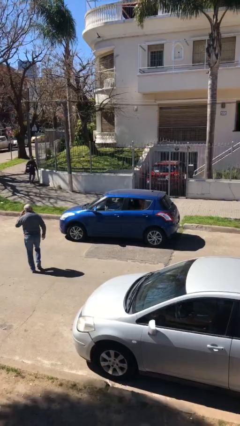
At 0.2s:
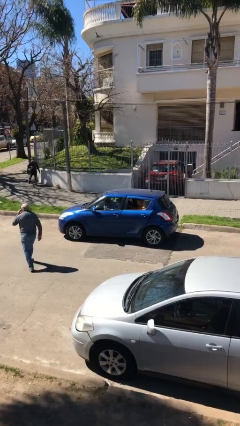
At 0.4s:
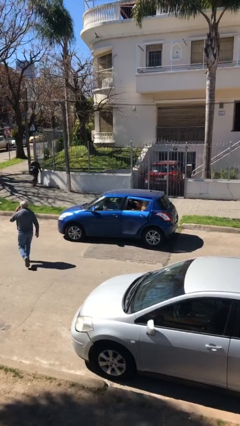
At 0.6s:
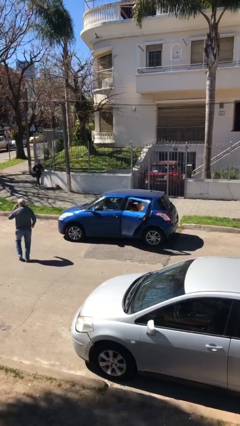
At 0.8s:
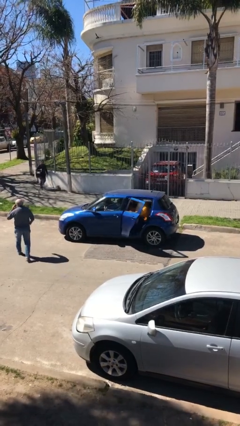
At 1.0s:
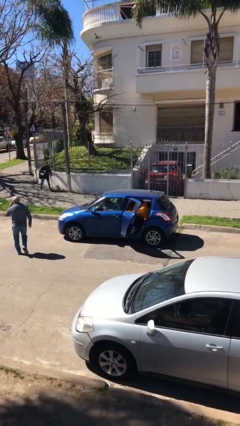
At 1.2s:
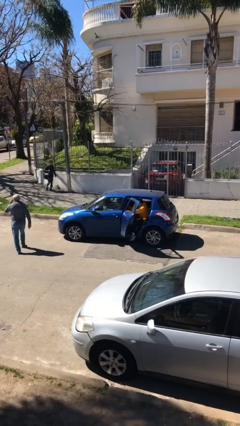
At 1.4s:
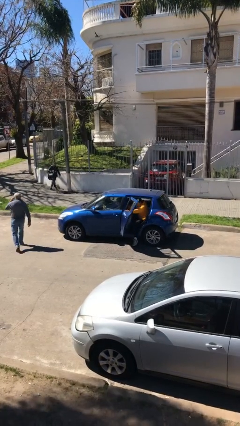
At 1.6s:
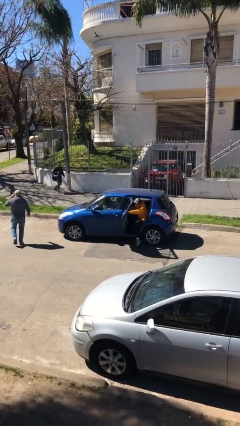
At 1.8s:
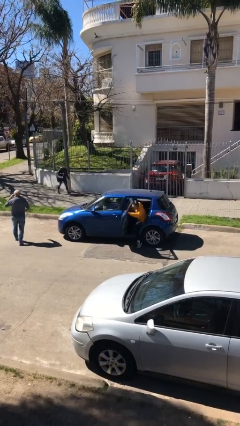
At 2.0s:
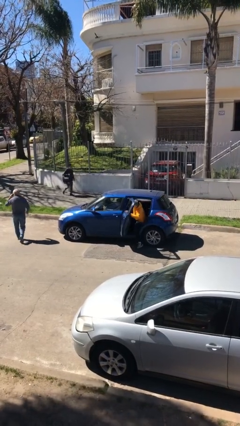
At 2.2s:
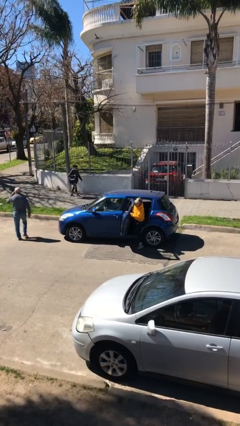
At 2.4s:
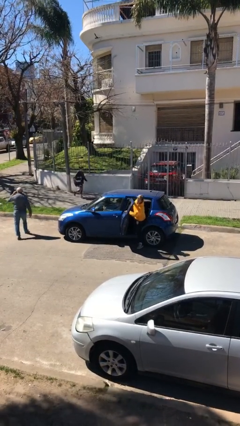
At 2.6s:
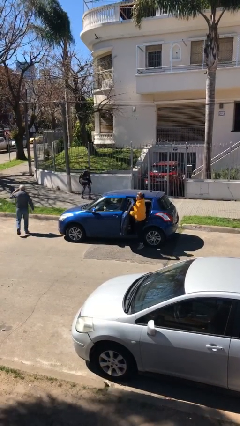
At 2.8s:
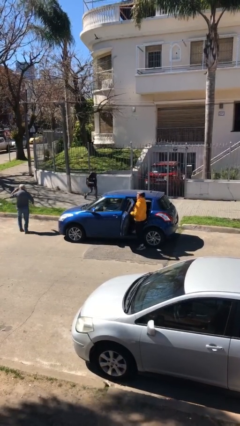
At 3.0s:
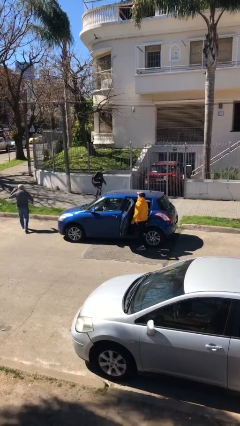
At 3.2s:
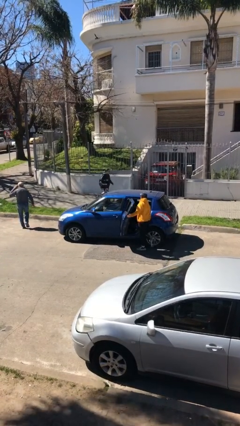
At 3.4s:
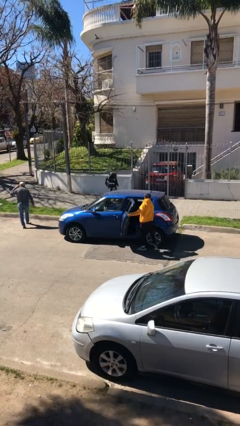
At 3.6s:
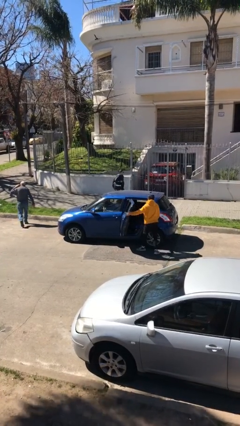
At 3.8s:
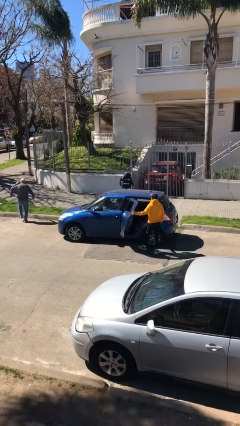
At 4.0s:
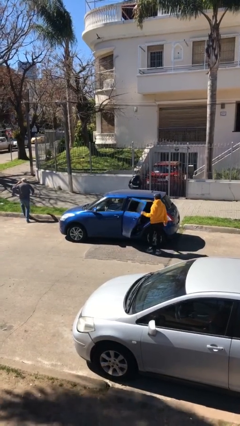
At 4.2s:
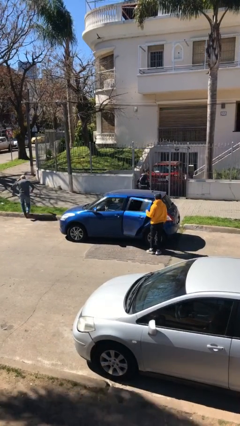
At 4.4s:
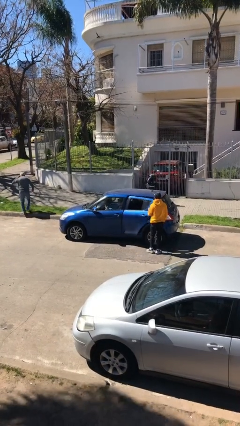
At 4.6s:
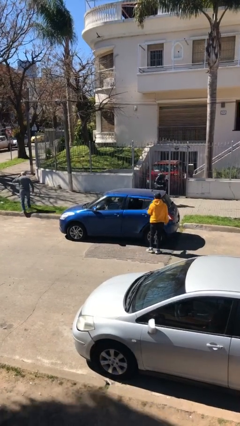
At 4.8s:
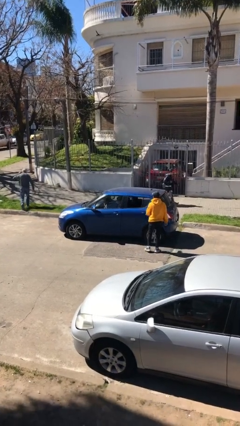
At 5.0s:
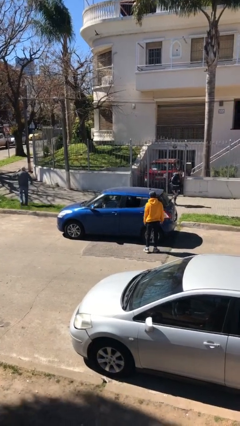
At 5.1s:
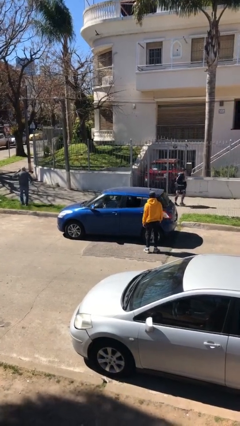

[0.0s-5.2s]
car drops off person

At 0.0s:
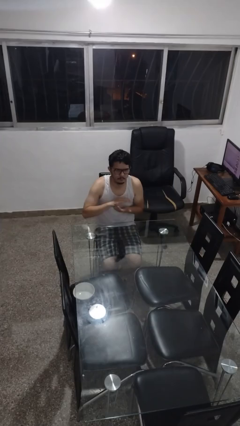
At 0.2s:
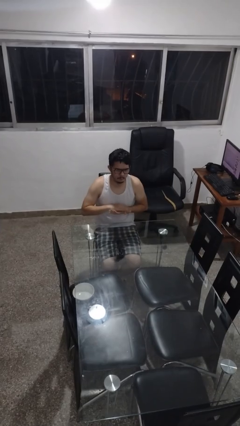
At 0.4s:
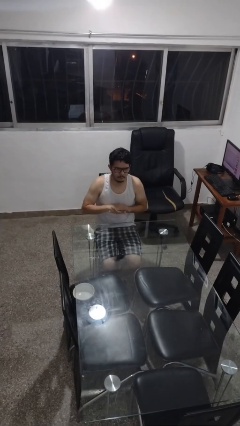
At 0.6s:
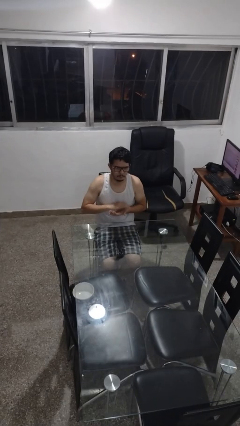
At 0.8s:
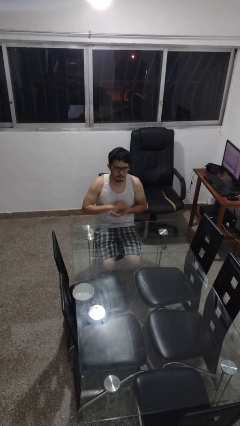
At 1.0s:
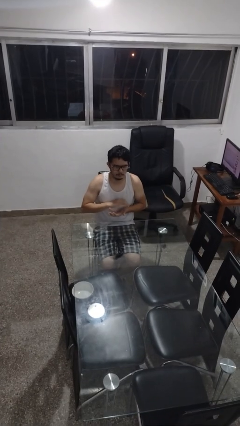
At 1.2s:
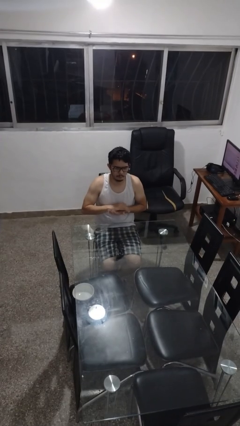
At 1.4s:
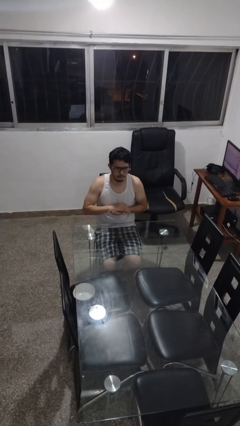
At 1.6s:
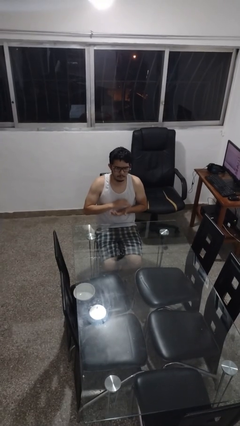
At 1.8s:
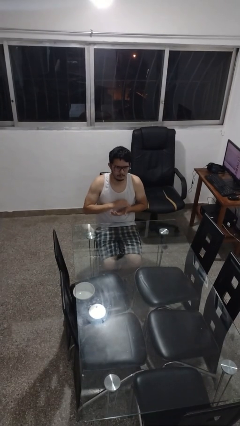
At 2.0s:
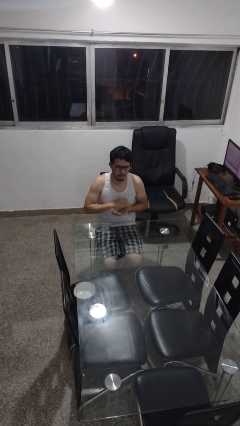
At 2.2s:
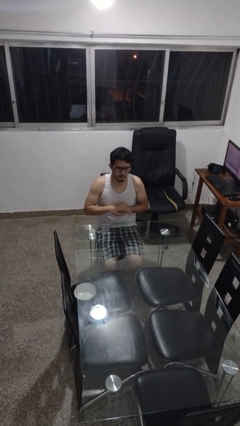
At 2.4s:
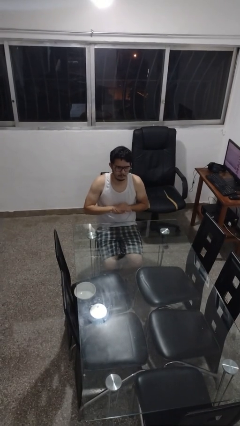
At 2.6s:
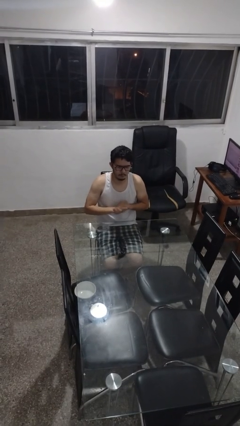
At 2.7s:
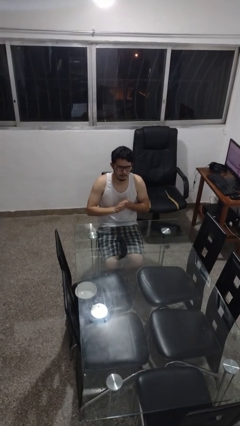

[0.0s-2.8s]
person claps hands

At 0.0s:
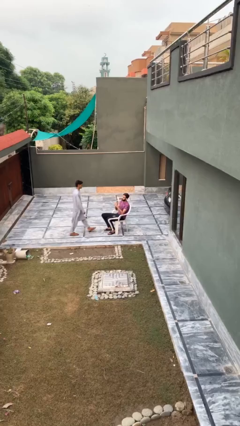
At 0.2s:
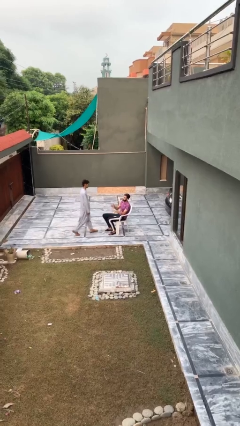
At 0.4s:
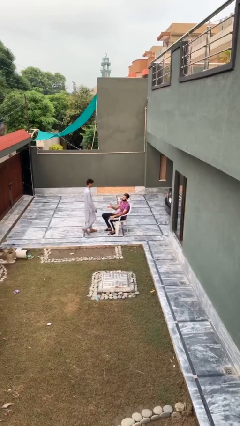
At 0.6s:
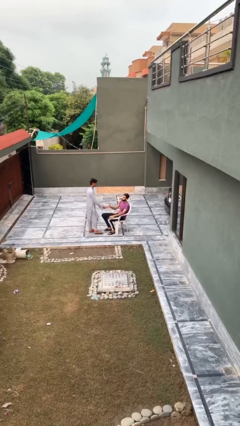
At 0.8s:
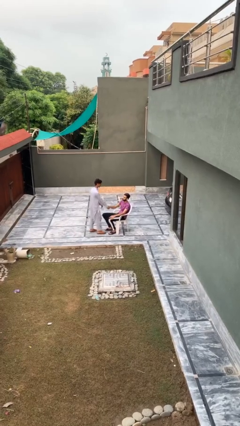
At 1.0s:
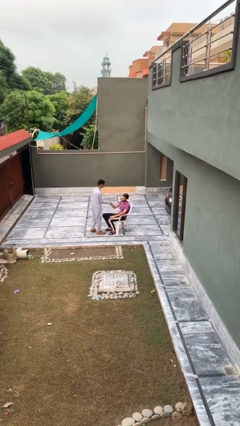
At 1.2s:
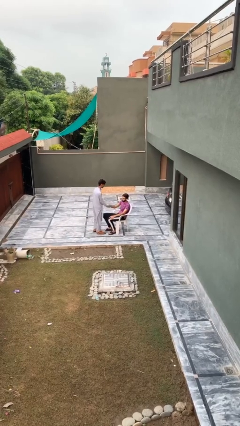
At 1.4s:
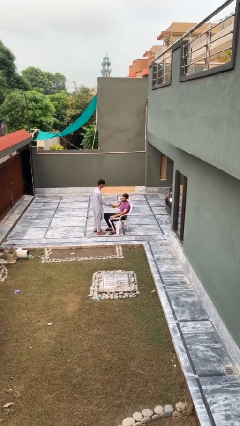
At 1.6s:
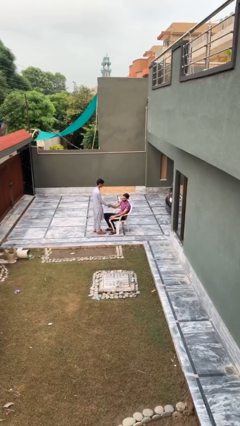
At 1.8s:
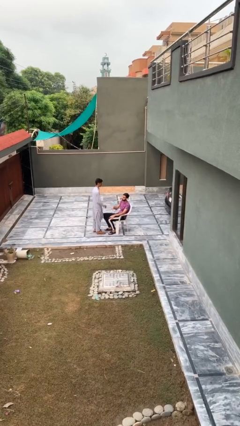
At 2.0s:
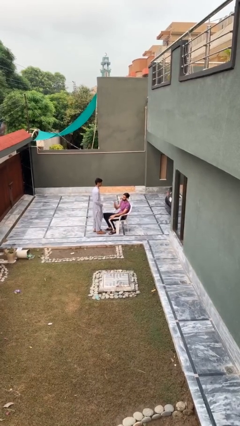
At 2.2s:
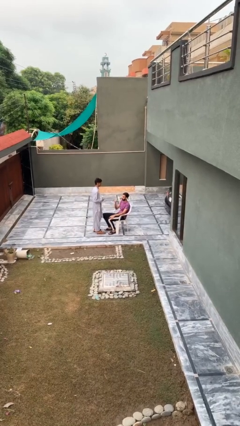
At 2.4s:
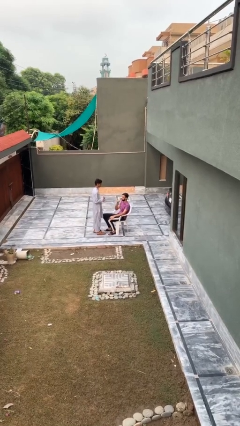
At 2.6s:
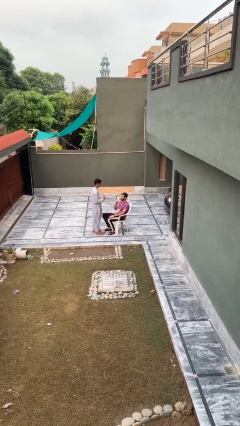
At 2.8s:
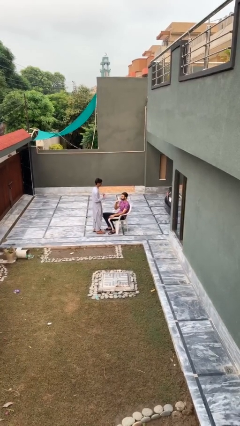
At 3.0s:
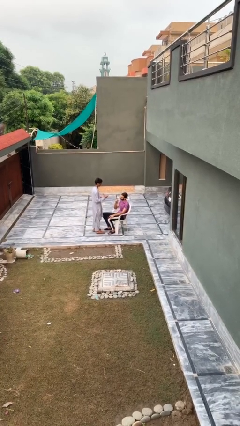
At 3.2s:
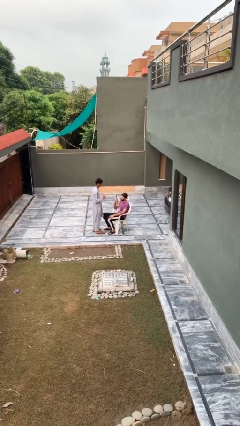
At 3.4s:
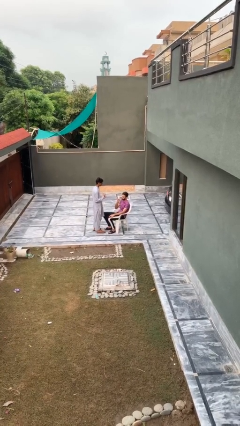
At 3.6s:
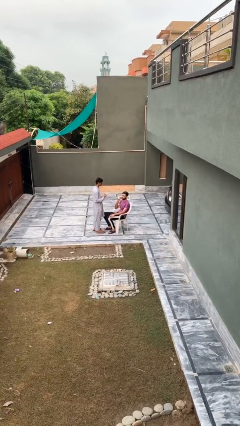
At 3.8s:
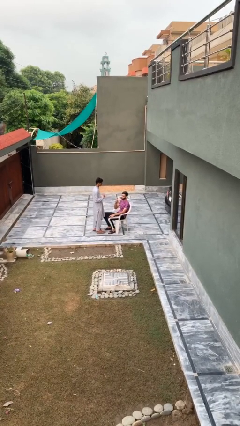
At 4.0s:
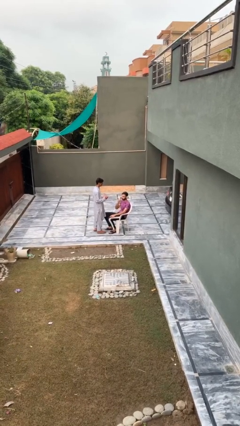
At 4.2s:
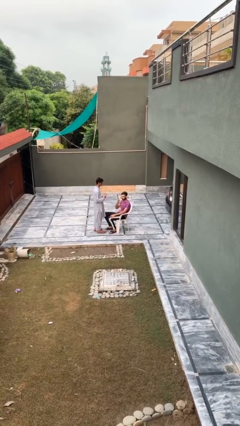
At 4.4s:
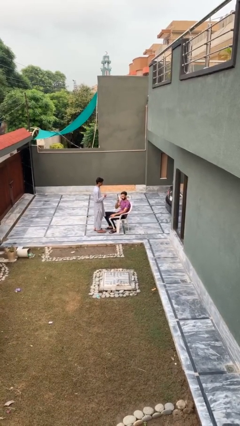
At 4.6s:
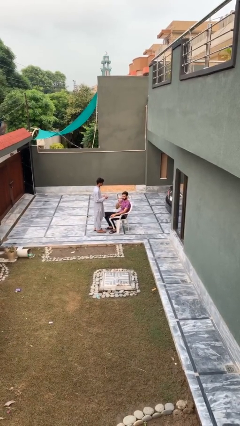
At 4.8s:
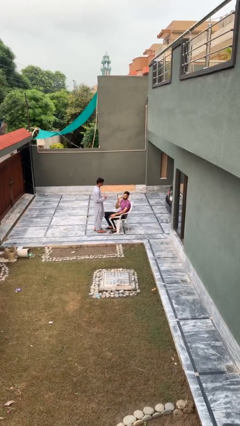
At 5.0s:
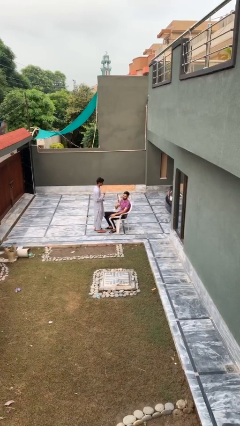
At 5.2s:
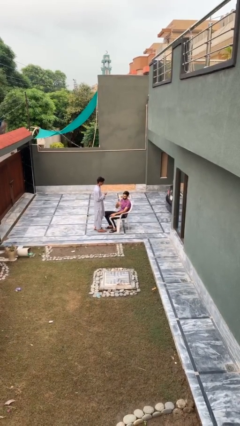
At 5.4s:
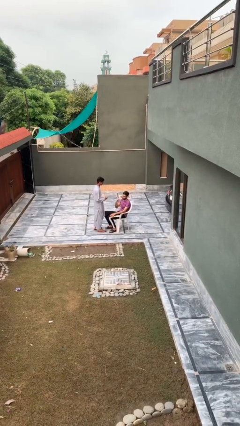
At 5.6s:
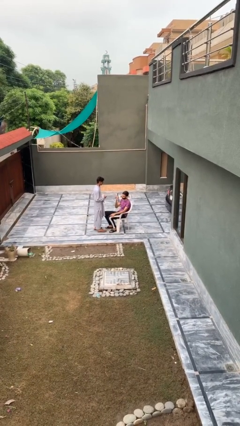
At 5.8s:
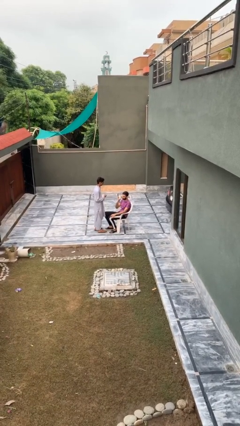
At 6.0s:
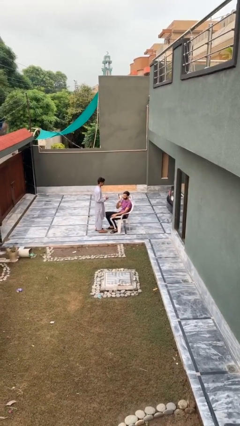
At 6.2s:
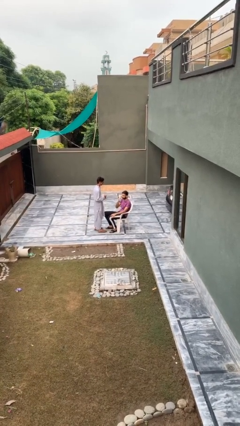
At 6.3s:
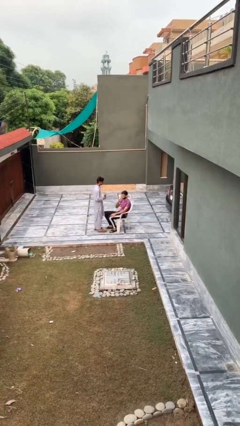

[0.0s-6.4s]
person shakes hand

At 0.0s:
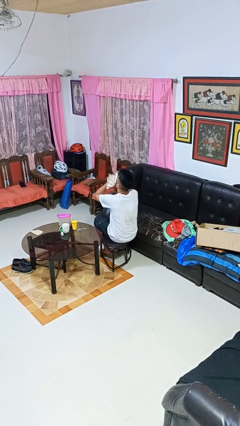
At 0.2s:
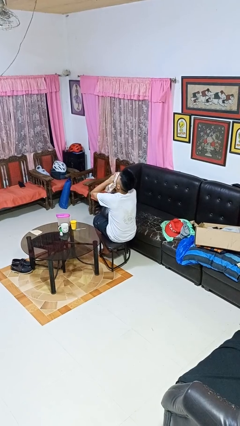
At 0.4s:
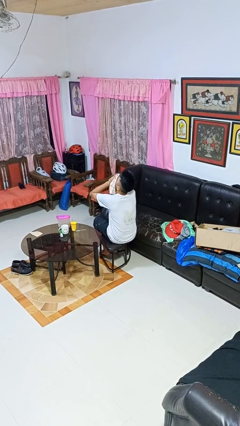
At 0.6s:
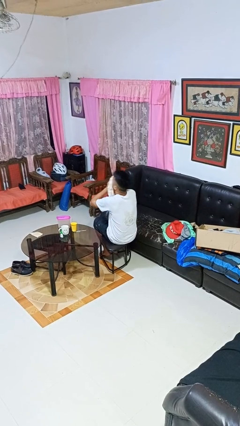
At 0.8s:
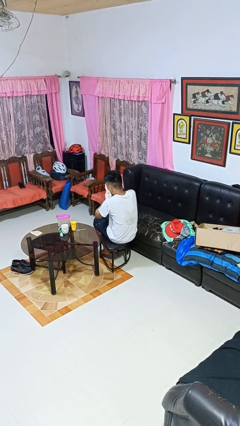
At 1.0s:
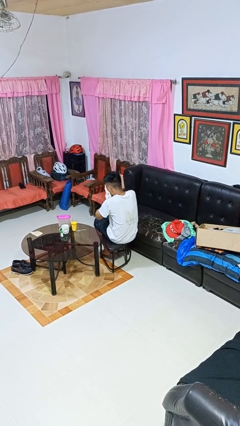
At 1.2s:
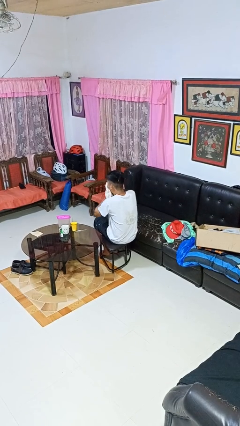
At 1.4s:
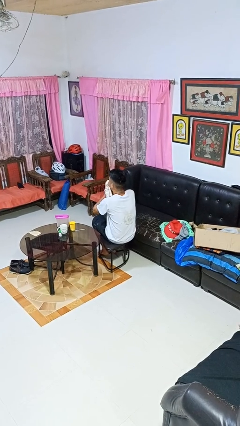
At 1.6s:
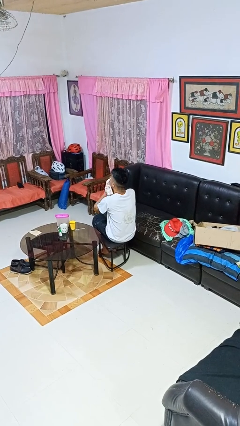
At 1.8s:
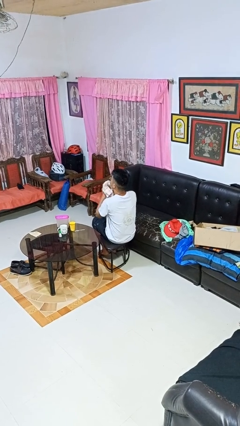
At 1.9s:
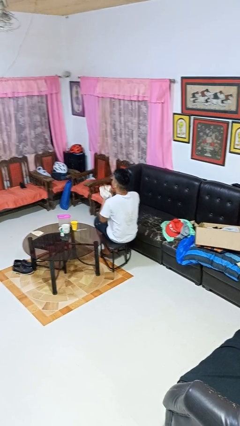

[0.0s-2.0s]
person blows nose

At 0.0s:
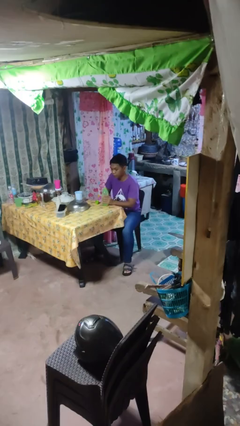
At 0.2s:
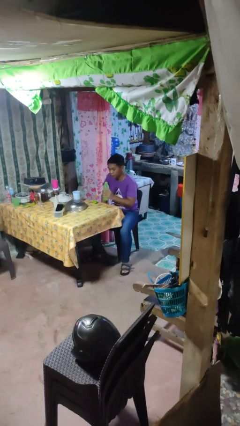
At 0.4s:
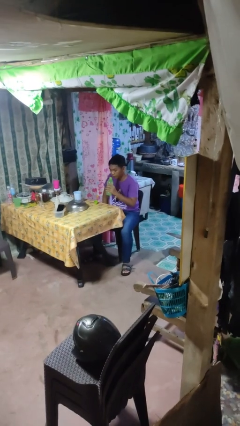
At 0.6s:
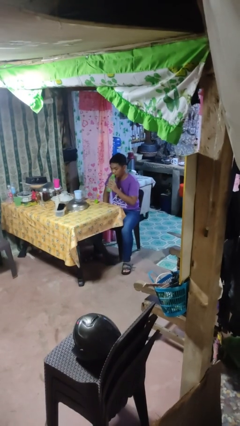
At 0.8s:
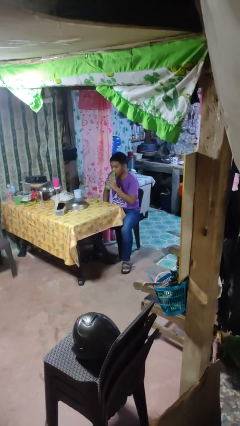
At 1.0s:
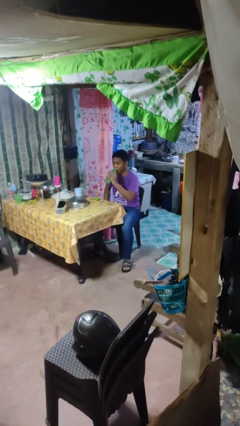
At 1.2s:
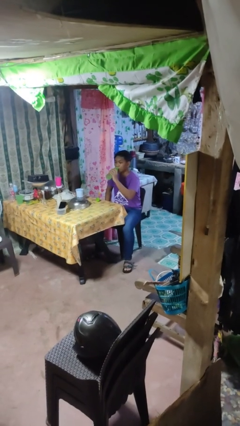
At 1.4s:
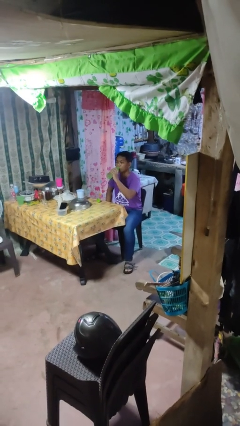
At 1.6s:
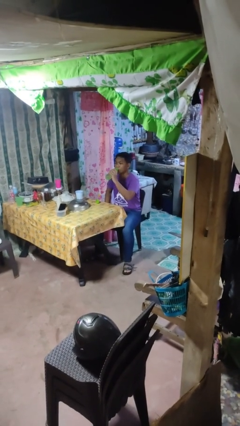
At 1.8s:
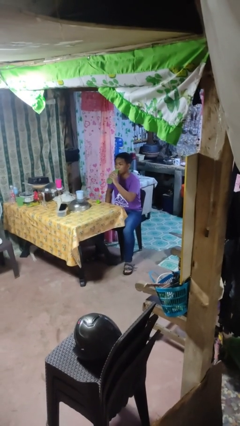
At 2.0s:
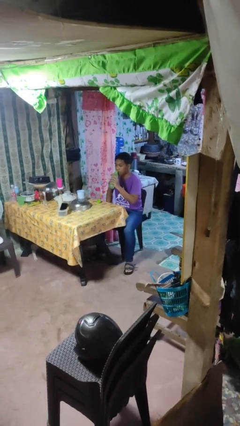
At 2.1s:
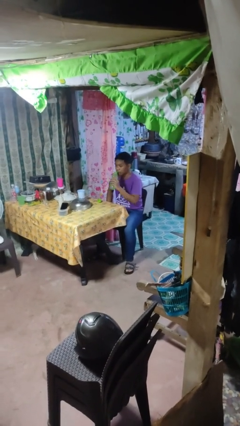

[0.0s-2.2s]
person drinks from bottle
